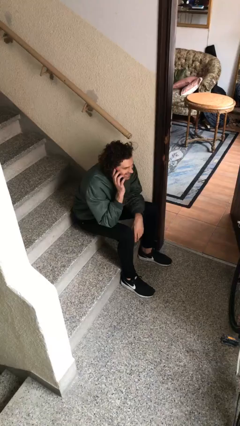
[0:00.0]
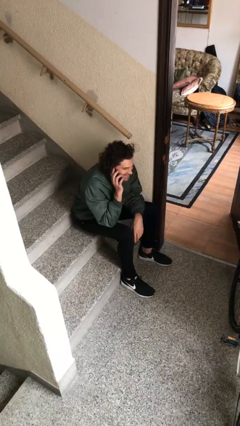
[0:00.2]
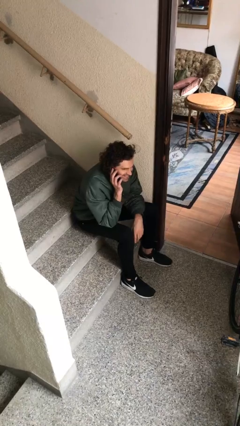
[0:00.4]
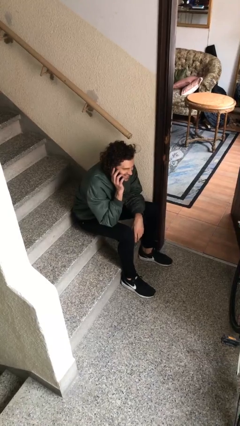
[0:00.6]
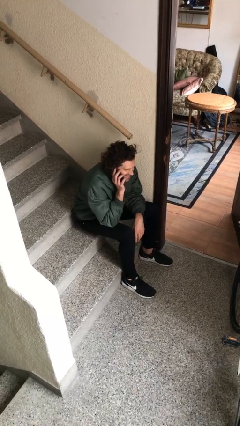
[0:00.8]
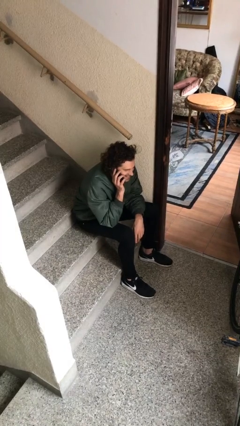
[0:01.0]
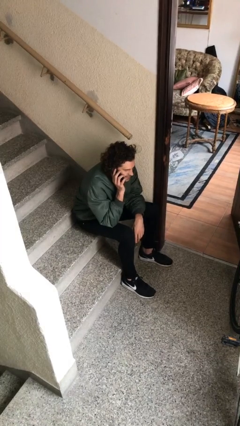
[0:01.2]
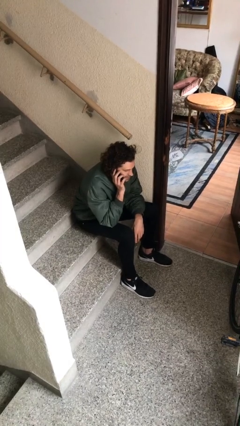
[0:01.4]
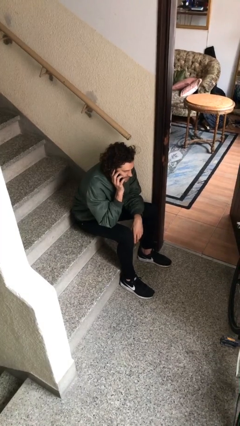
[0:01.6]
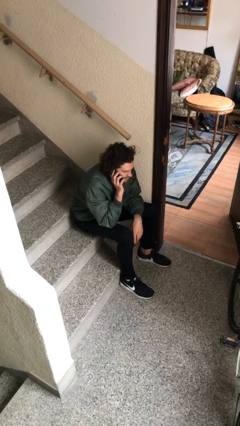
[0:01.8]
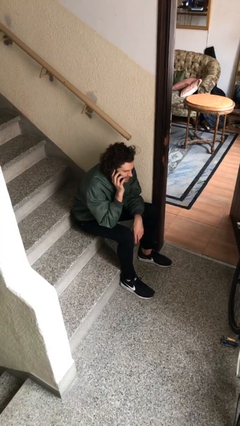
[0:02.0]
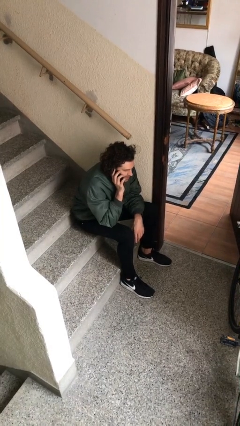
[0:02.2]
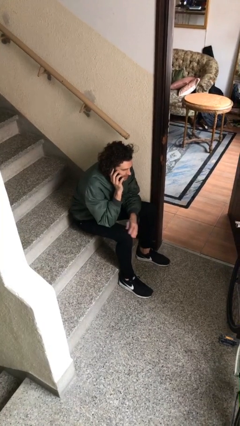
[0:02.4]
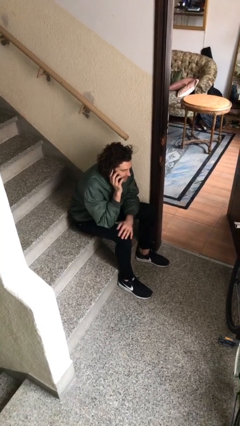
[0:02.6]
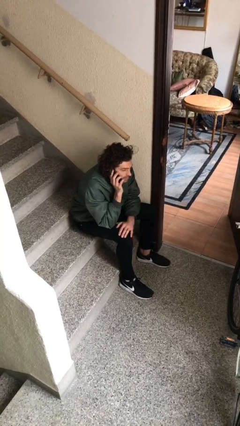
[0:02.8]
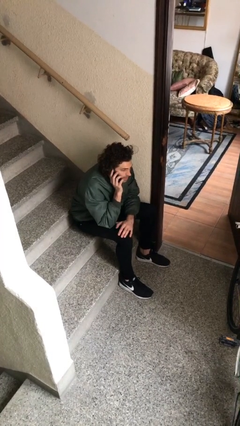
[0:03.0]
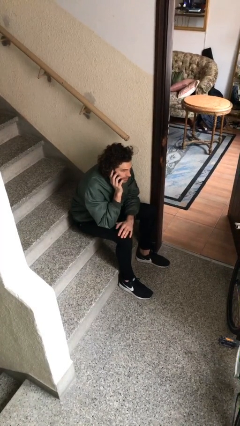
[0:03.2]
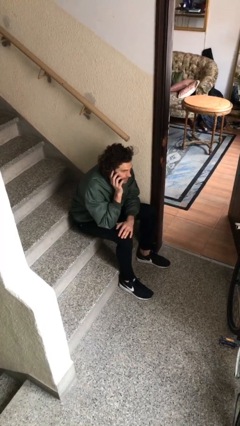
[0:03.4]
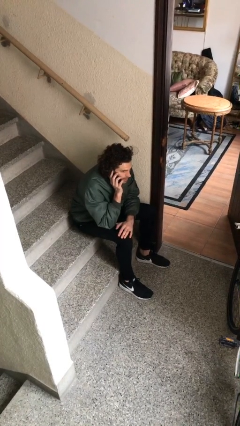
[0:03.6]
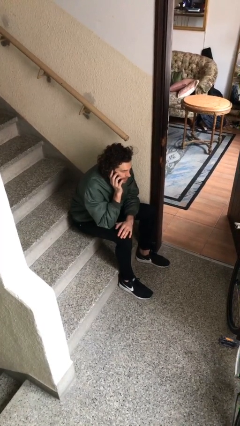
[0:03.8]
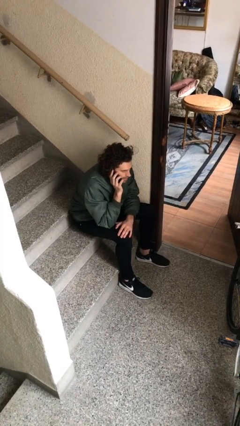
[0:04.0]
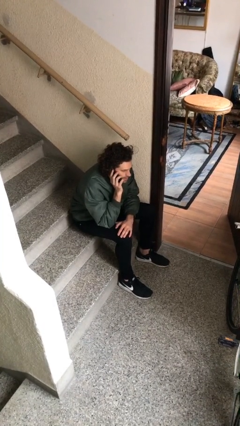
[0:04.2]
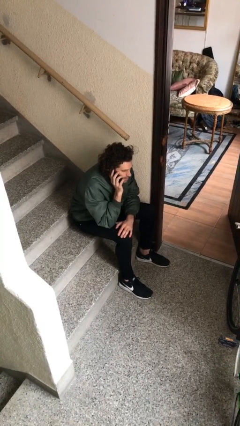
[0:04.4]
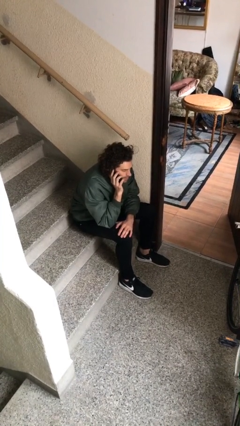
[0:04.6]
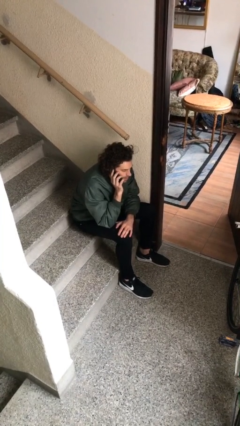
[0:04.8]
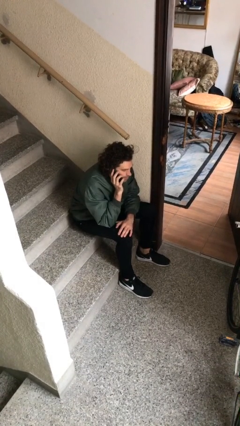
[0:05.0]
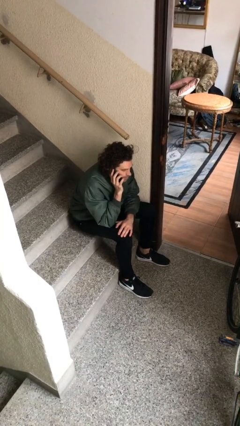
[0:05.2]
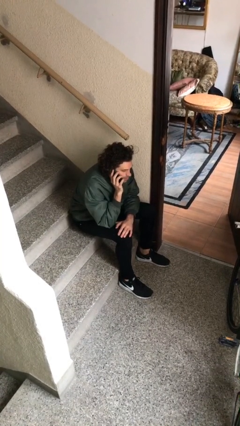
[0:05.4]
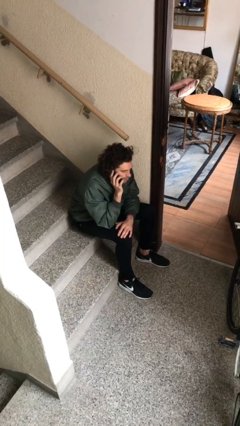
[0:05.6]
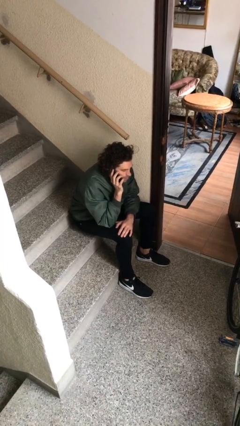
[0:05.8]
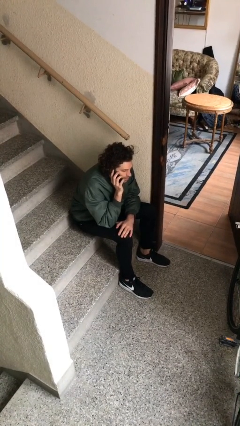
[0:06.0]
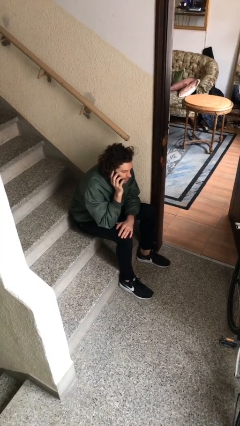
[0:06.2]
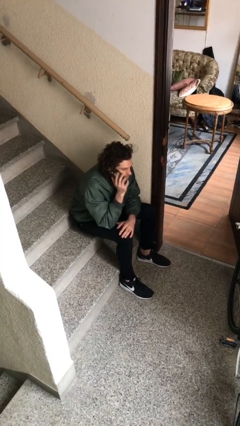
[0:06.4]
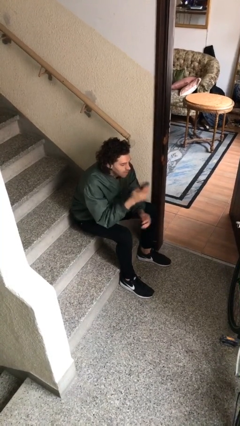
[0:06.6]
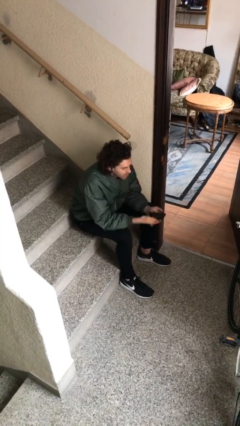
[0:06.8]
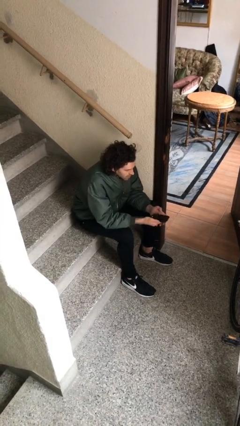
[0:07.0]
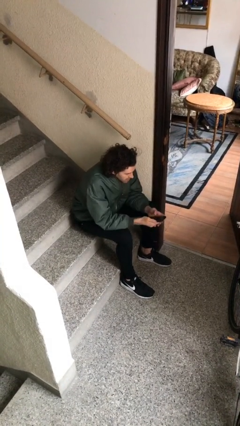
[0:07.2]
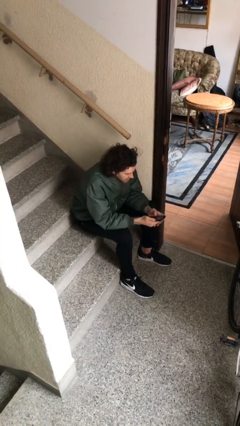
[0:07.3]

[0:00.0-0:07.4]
person talks on phone

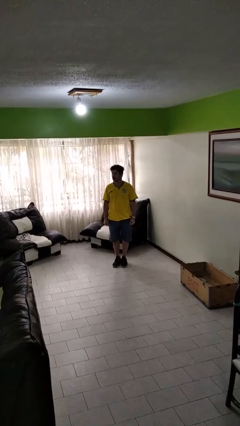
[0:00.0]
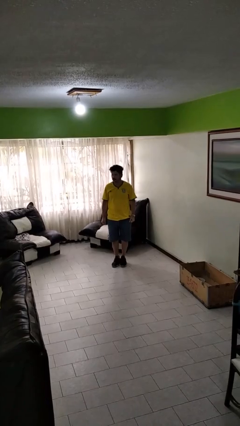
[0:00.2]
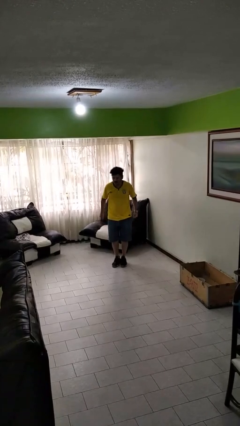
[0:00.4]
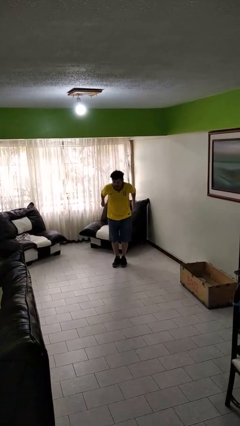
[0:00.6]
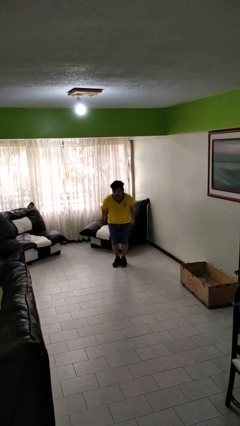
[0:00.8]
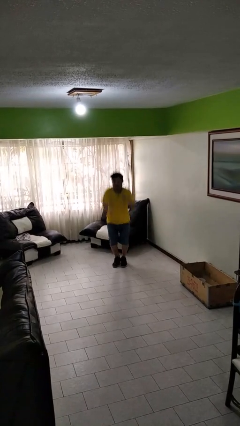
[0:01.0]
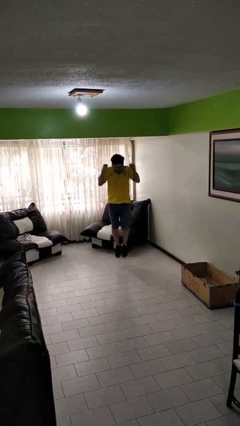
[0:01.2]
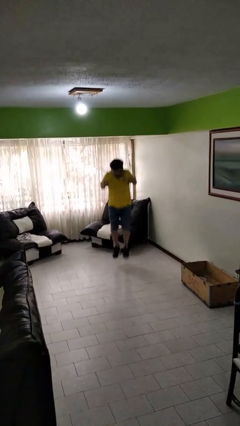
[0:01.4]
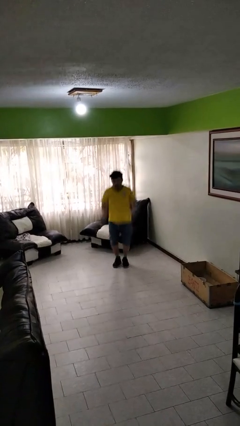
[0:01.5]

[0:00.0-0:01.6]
person jumps

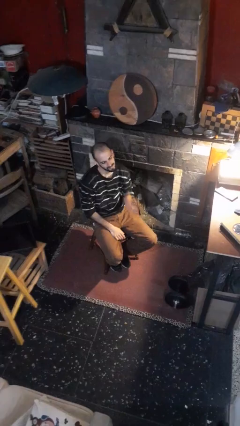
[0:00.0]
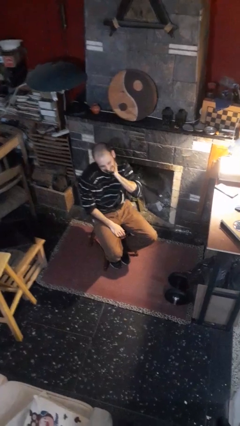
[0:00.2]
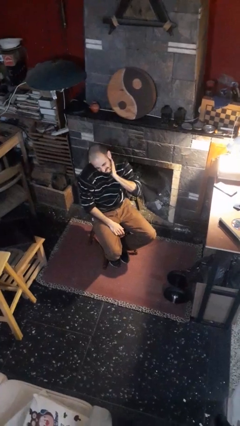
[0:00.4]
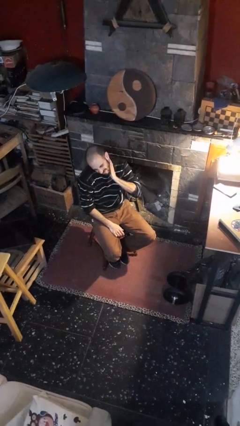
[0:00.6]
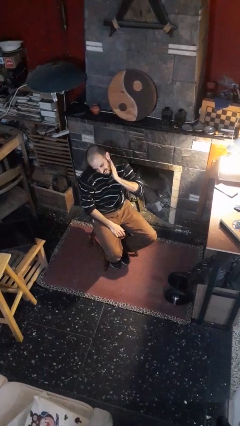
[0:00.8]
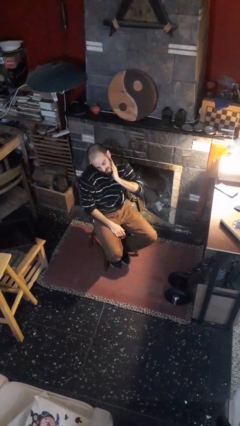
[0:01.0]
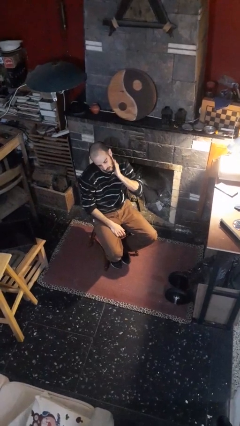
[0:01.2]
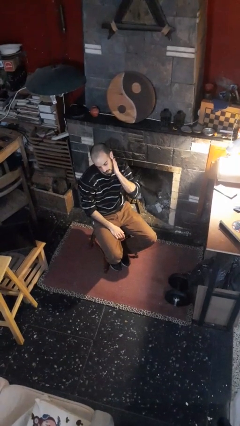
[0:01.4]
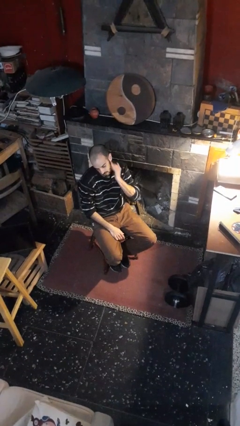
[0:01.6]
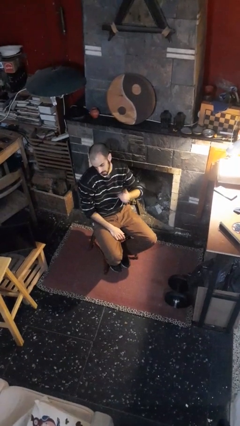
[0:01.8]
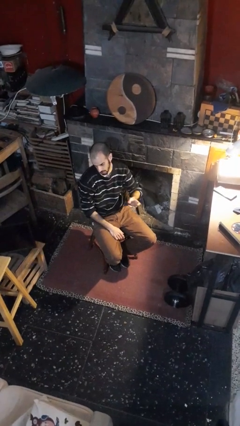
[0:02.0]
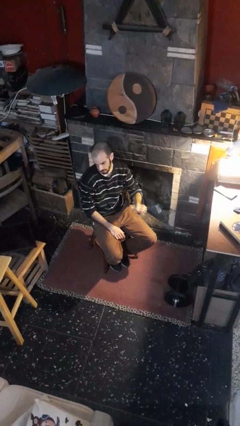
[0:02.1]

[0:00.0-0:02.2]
person swats bug

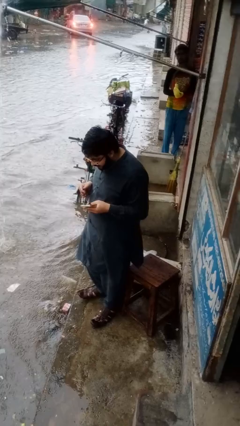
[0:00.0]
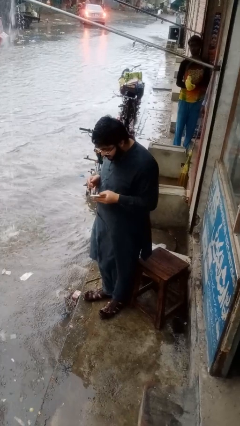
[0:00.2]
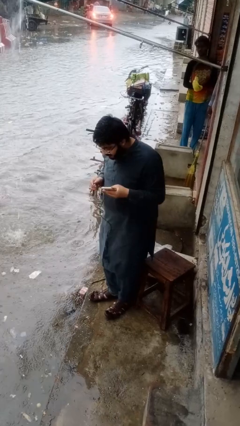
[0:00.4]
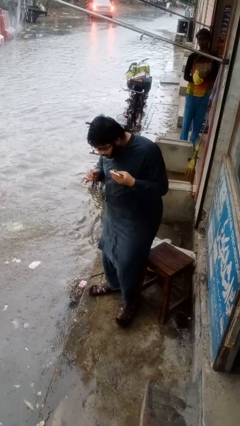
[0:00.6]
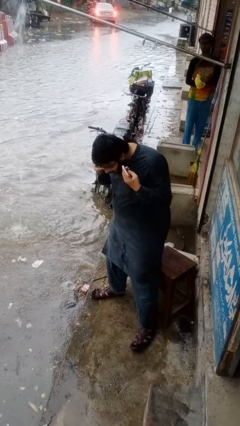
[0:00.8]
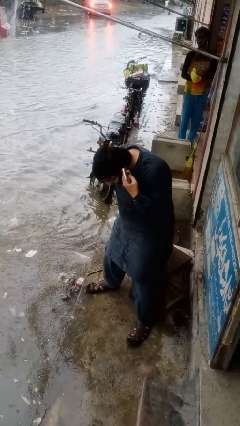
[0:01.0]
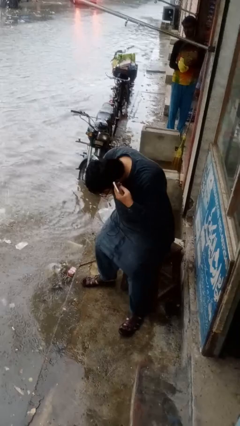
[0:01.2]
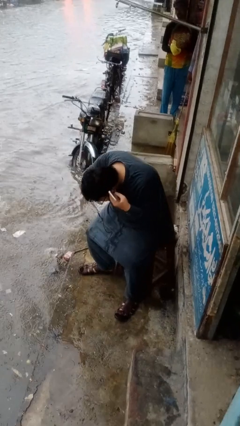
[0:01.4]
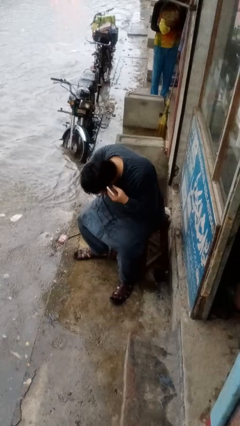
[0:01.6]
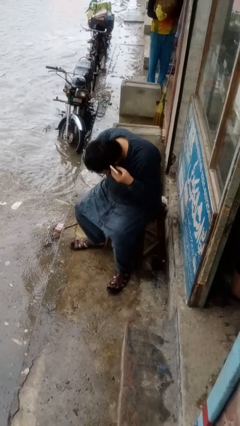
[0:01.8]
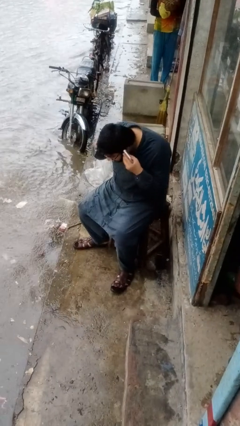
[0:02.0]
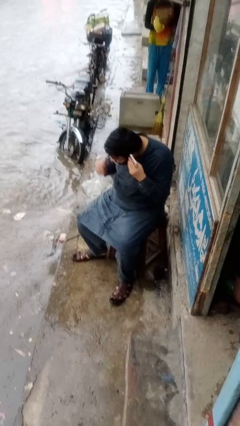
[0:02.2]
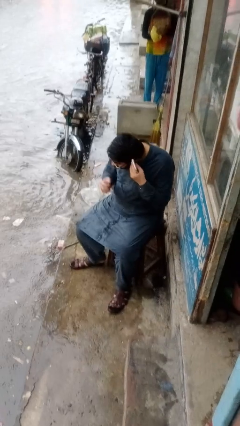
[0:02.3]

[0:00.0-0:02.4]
person puts on headphones

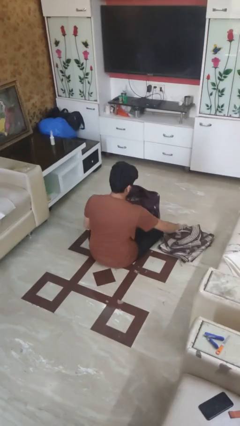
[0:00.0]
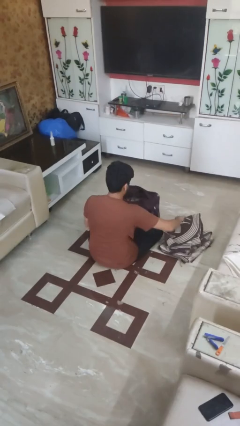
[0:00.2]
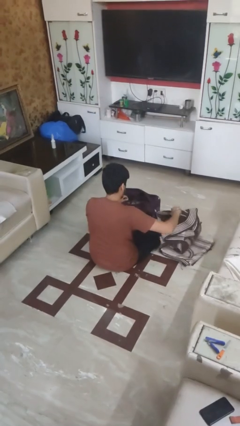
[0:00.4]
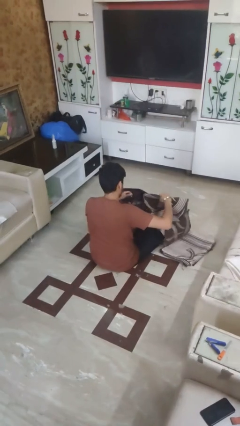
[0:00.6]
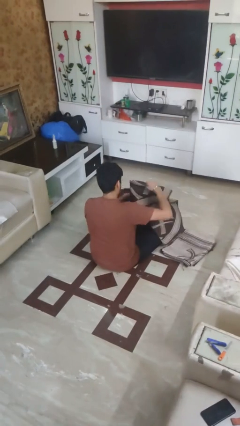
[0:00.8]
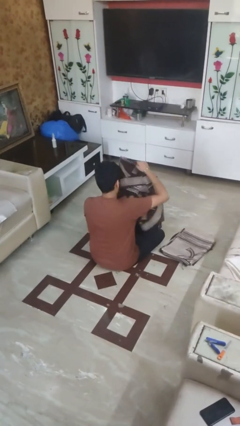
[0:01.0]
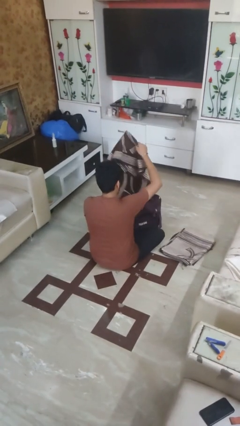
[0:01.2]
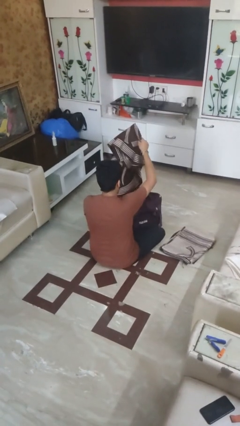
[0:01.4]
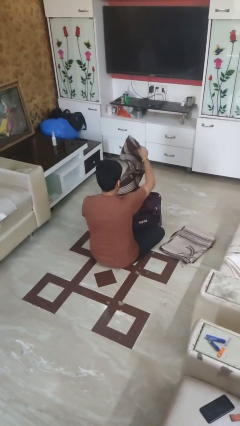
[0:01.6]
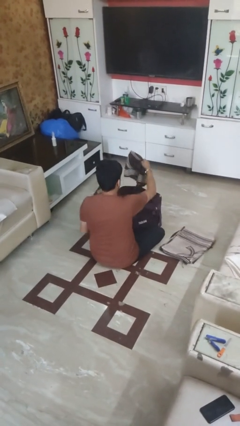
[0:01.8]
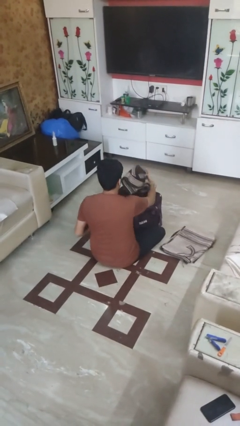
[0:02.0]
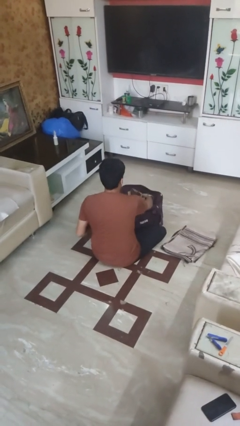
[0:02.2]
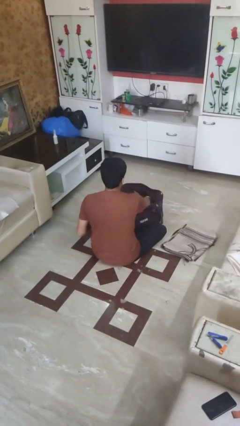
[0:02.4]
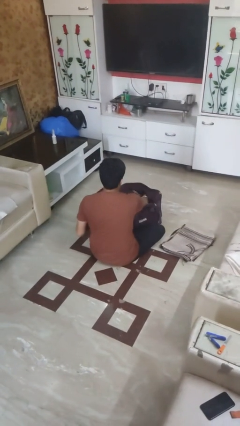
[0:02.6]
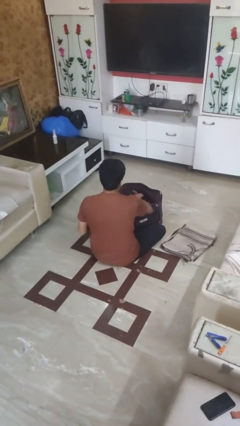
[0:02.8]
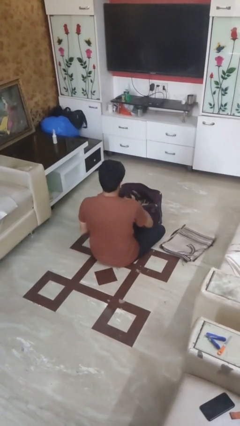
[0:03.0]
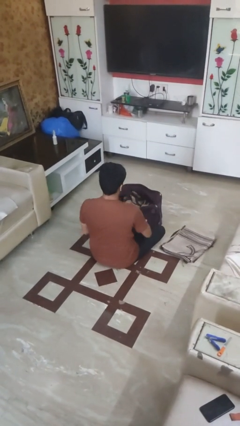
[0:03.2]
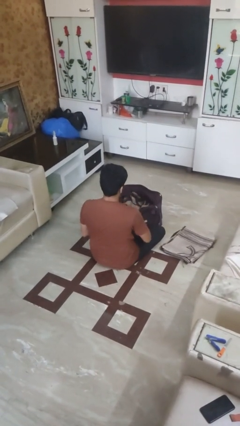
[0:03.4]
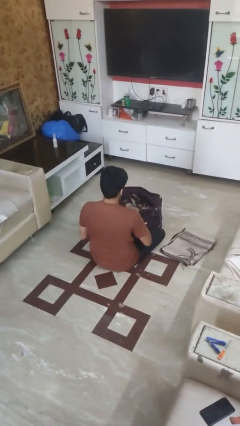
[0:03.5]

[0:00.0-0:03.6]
person loads clothes into suitcase

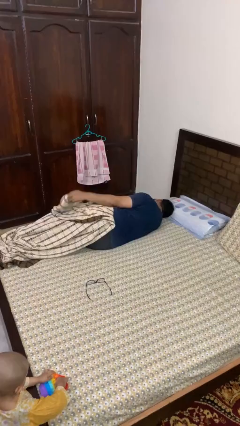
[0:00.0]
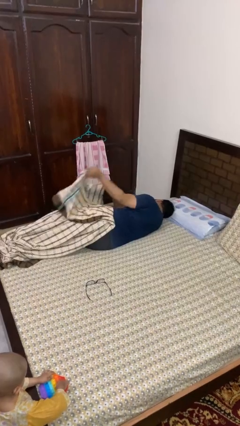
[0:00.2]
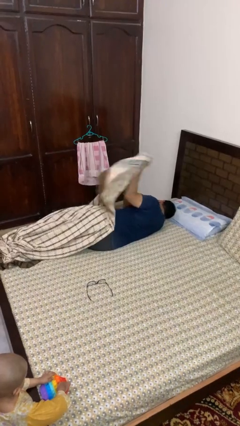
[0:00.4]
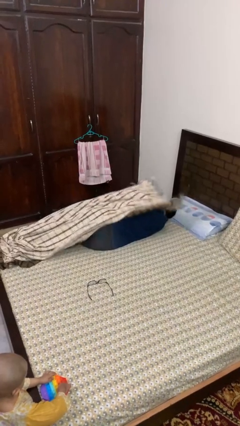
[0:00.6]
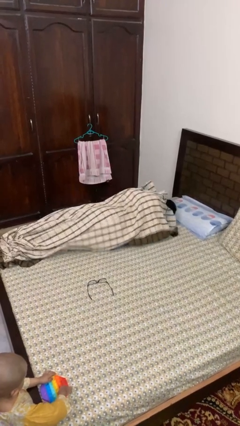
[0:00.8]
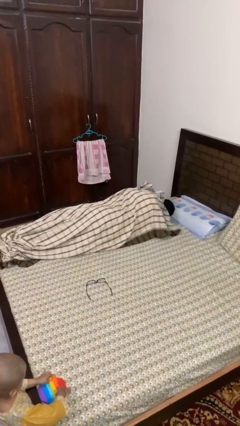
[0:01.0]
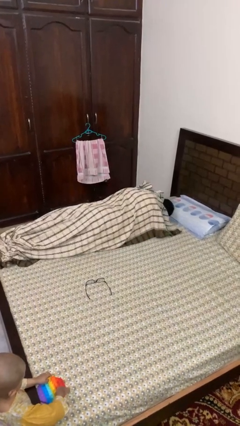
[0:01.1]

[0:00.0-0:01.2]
person covers with blanket
